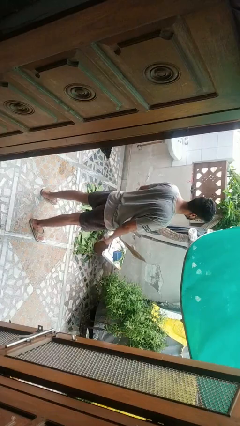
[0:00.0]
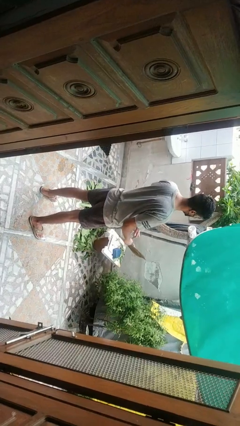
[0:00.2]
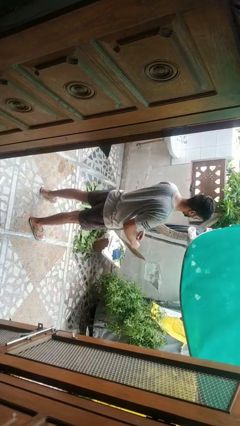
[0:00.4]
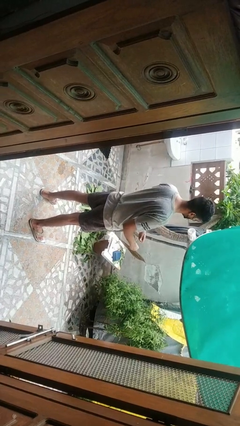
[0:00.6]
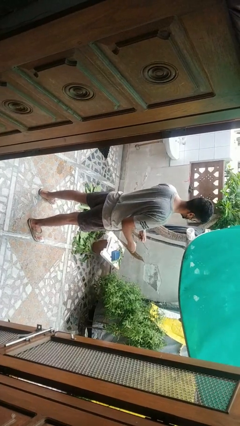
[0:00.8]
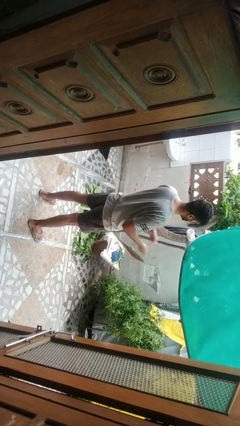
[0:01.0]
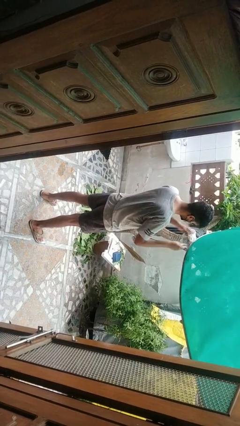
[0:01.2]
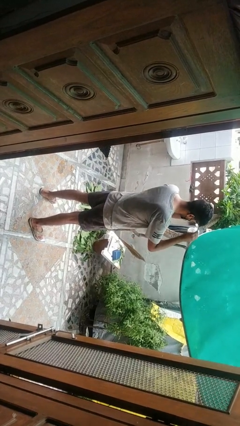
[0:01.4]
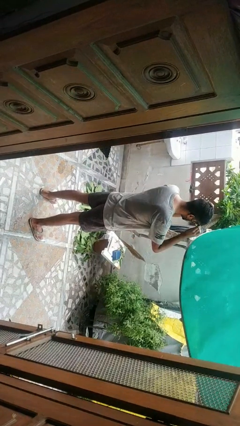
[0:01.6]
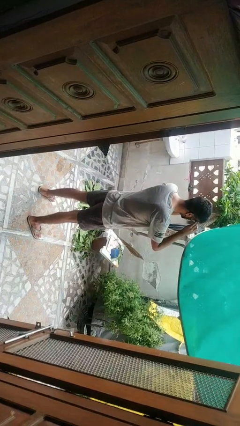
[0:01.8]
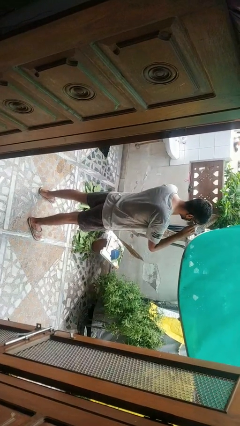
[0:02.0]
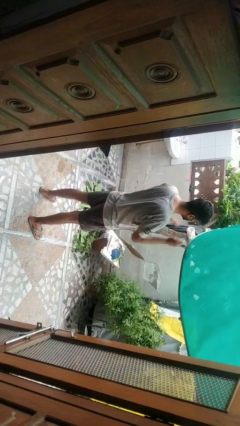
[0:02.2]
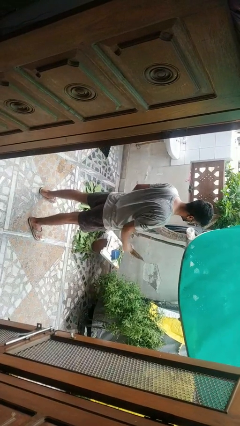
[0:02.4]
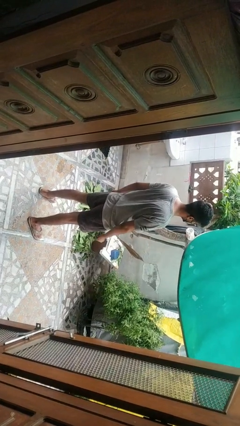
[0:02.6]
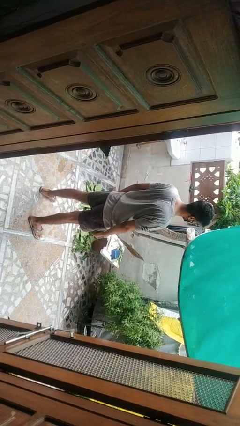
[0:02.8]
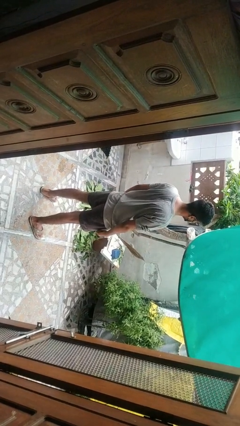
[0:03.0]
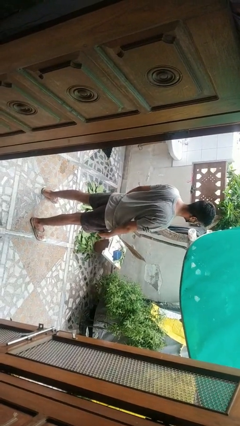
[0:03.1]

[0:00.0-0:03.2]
person puts on glasses

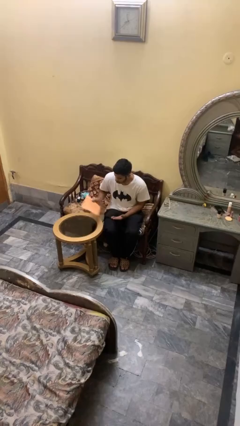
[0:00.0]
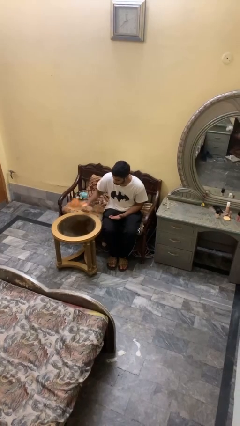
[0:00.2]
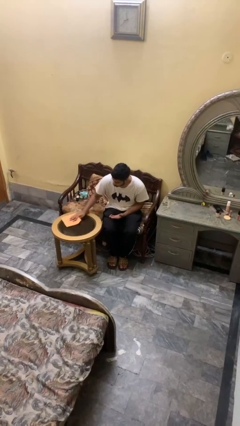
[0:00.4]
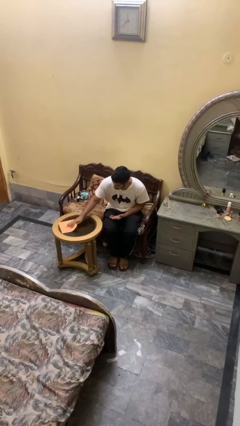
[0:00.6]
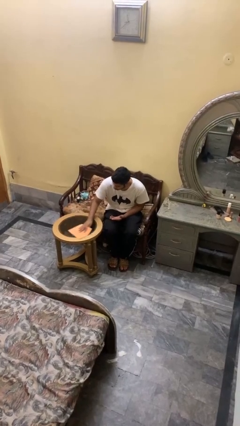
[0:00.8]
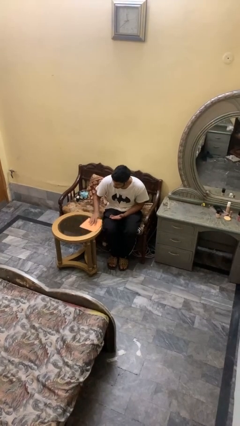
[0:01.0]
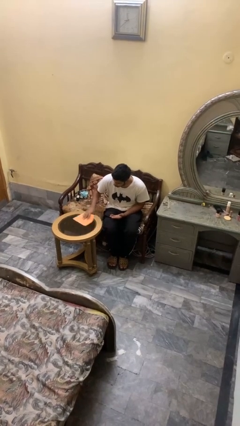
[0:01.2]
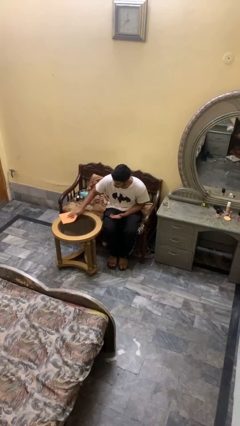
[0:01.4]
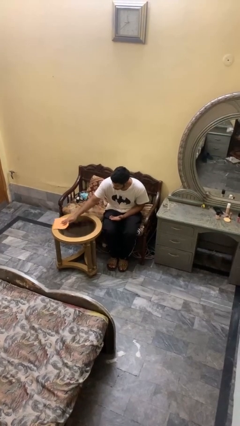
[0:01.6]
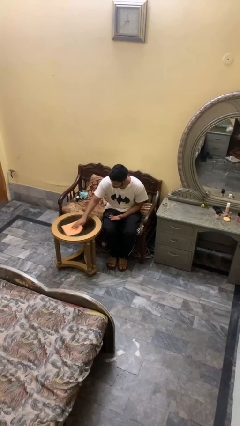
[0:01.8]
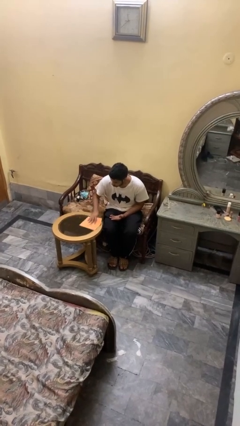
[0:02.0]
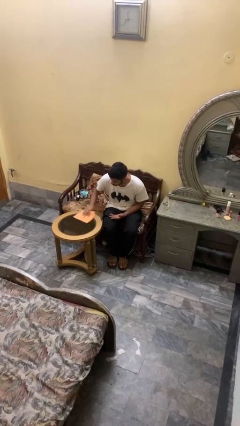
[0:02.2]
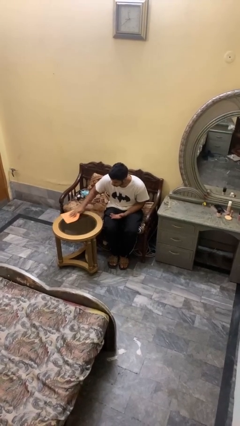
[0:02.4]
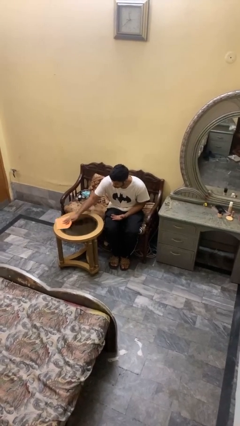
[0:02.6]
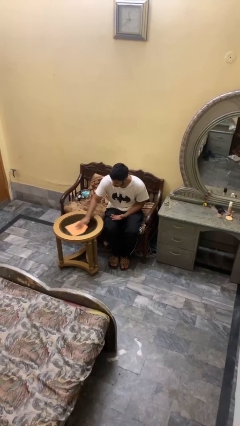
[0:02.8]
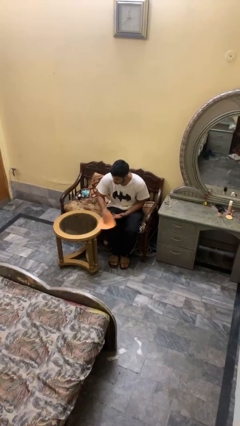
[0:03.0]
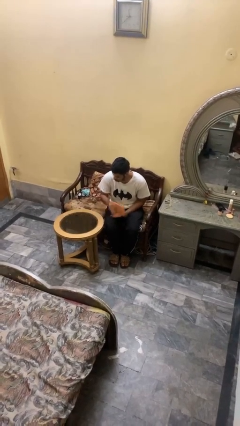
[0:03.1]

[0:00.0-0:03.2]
person cleans table with rag

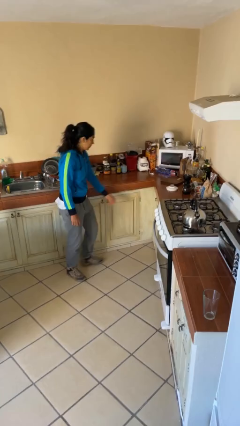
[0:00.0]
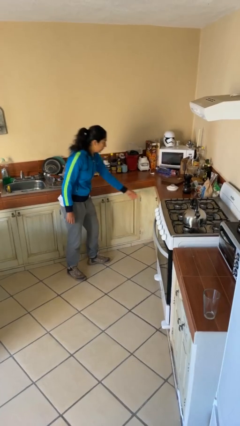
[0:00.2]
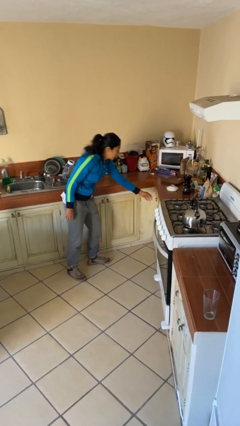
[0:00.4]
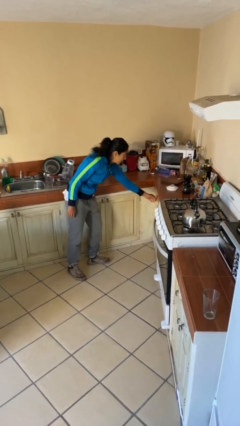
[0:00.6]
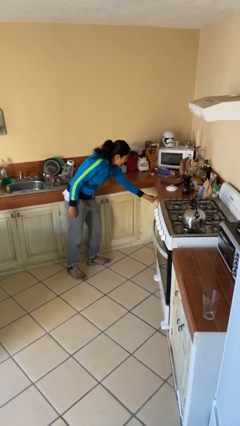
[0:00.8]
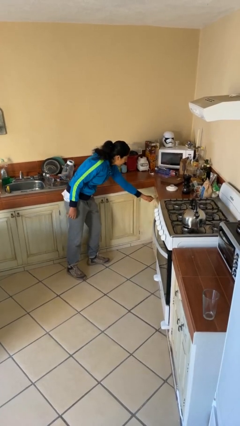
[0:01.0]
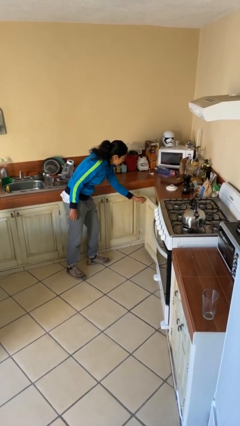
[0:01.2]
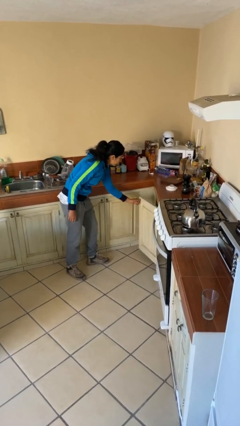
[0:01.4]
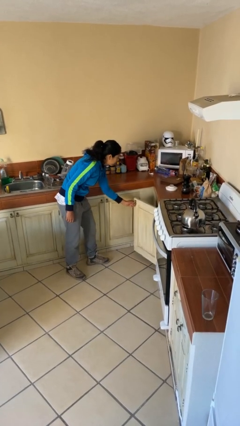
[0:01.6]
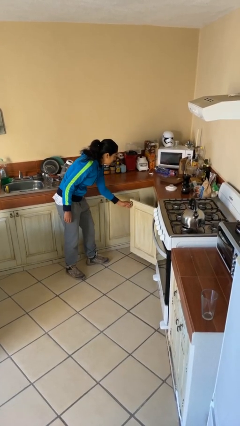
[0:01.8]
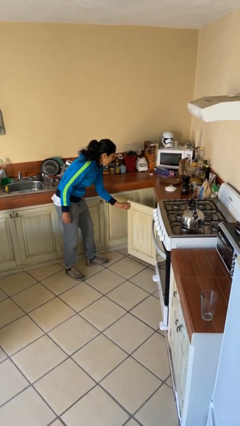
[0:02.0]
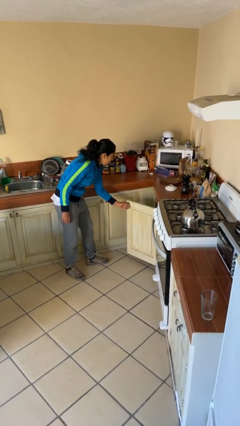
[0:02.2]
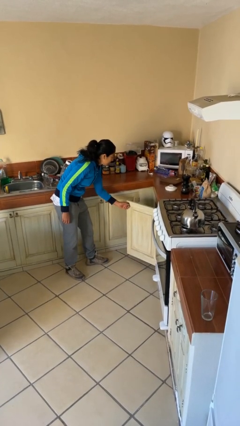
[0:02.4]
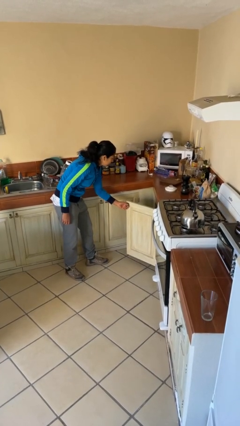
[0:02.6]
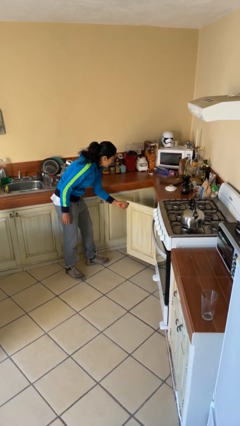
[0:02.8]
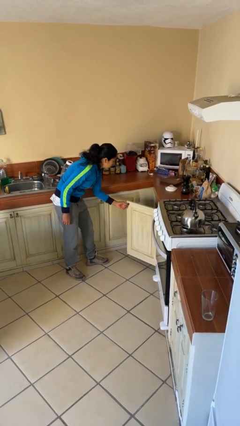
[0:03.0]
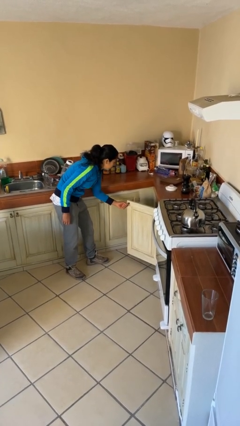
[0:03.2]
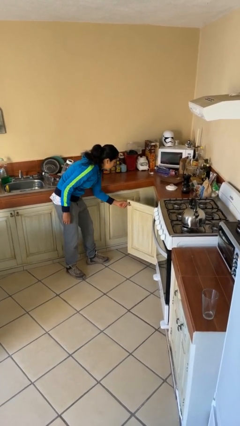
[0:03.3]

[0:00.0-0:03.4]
person opens cabinet

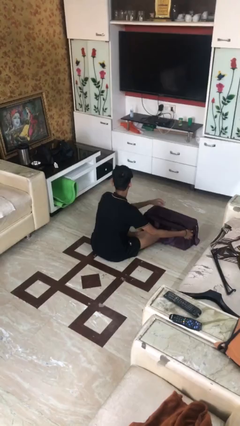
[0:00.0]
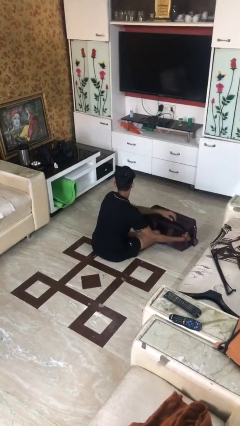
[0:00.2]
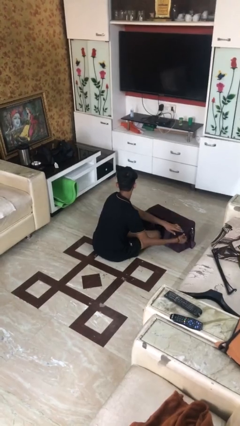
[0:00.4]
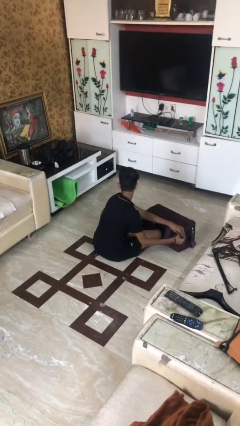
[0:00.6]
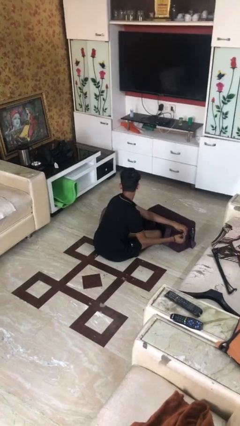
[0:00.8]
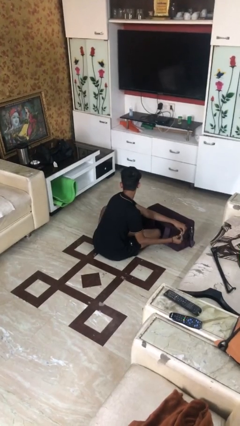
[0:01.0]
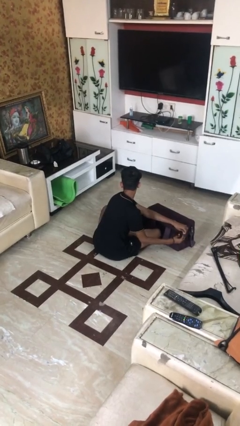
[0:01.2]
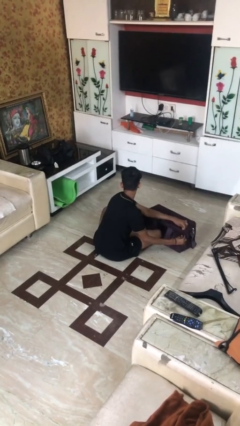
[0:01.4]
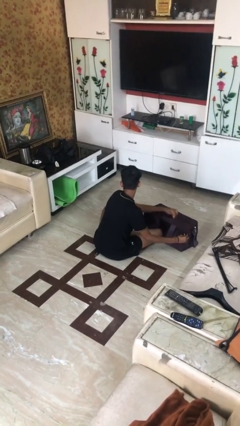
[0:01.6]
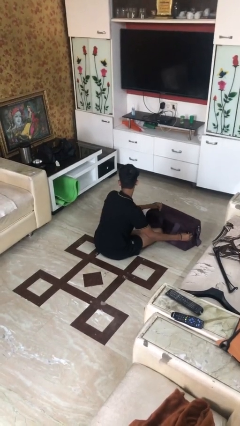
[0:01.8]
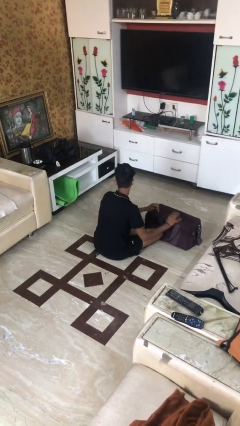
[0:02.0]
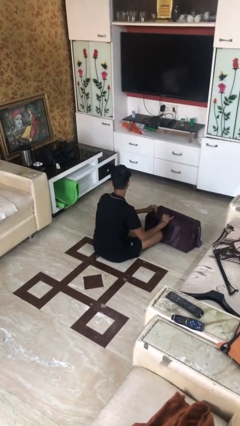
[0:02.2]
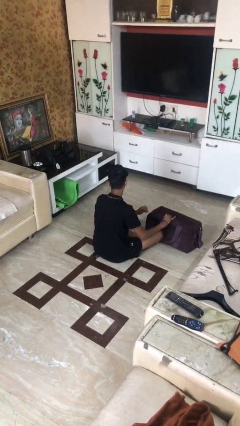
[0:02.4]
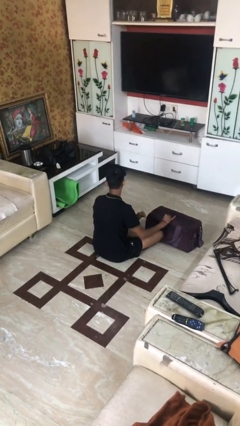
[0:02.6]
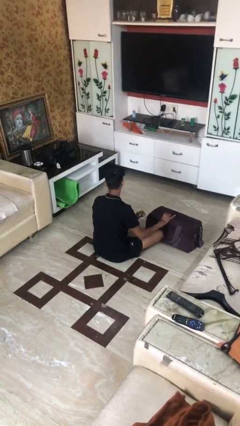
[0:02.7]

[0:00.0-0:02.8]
person closes suitcase

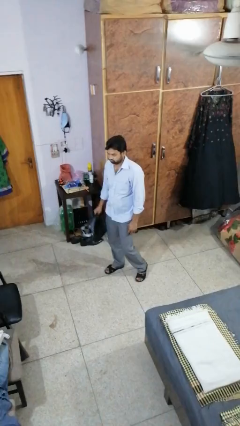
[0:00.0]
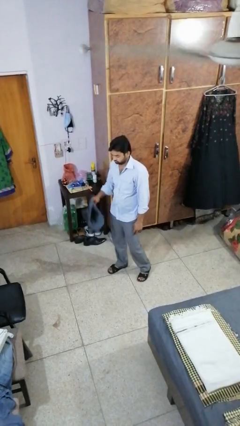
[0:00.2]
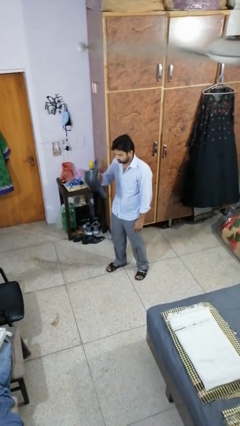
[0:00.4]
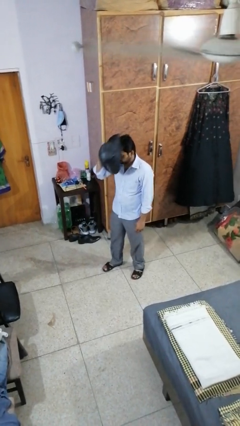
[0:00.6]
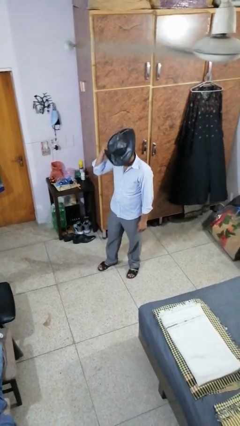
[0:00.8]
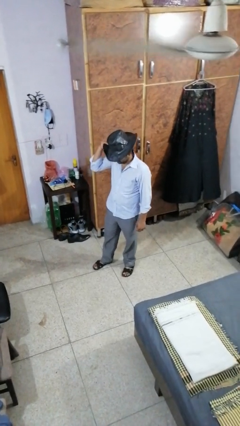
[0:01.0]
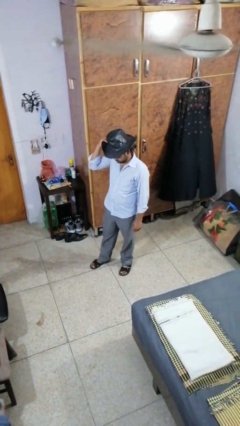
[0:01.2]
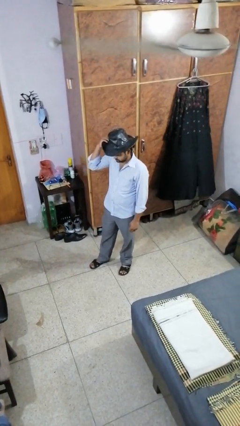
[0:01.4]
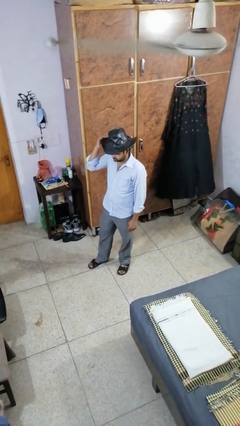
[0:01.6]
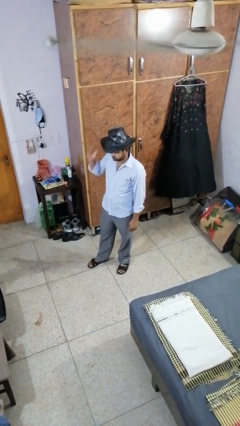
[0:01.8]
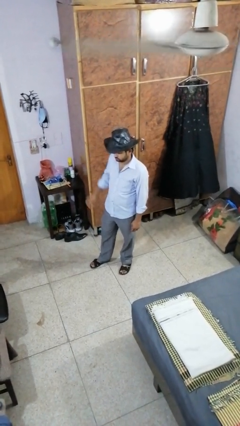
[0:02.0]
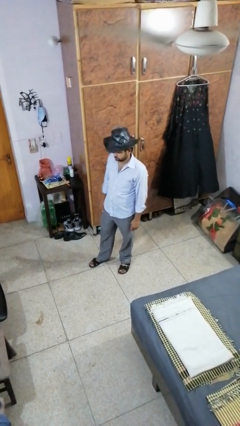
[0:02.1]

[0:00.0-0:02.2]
person puts on hat

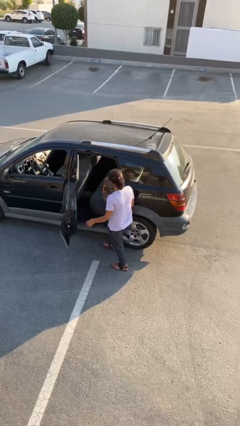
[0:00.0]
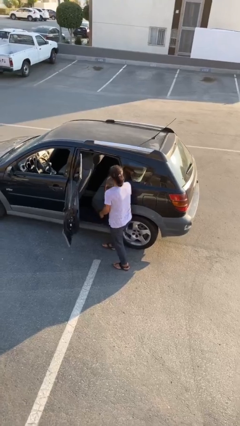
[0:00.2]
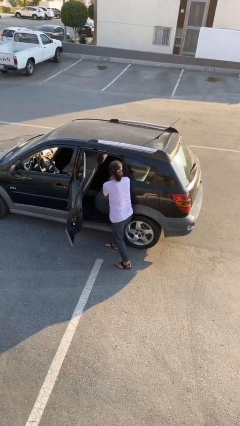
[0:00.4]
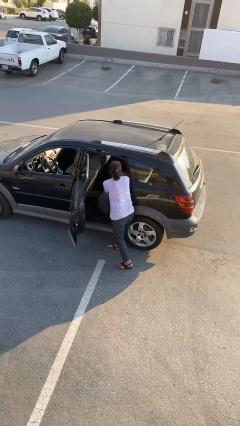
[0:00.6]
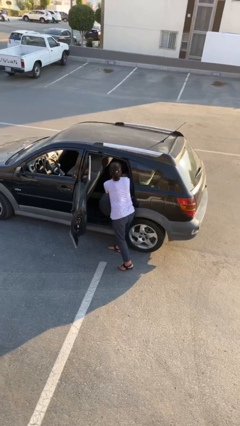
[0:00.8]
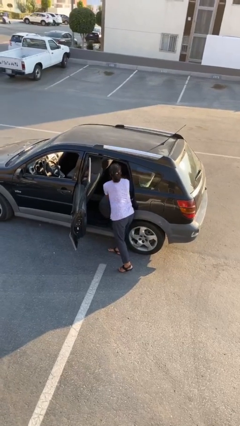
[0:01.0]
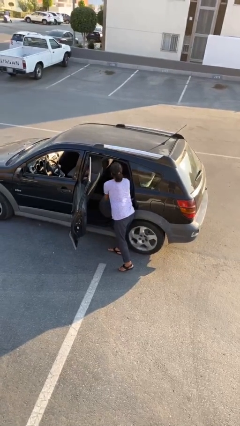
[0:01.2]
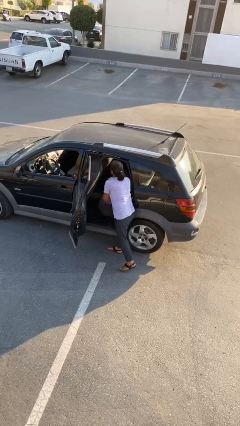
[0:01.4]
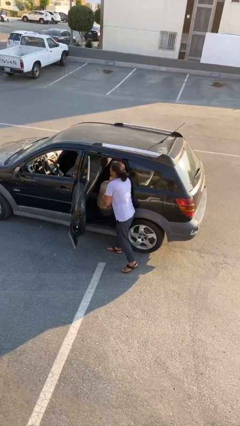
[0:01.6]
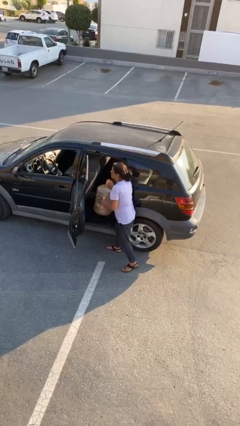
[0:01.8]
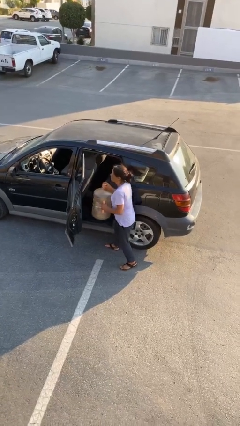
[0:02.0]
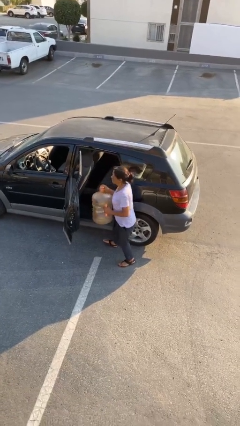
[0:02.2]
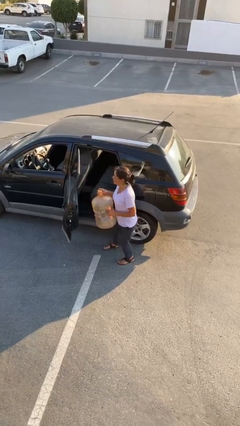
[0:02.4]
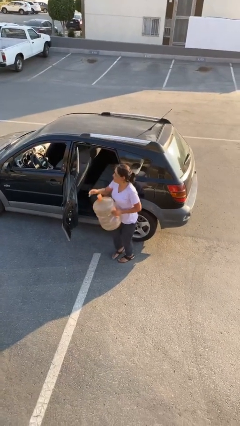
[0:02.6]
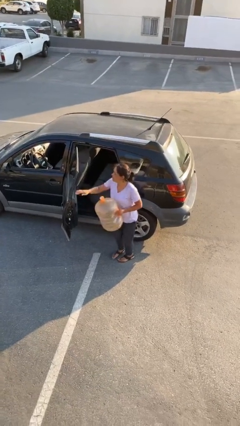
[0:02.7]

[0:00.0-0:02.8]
person unloads car
